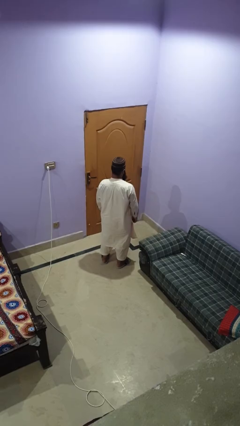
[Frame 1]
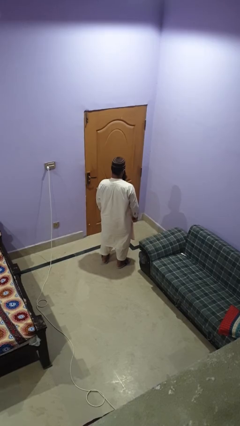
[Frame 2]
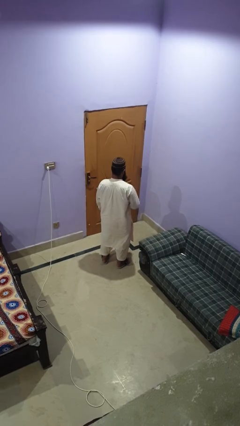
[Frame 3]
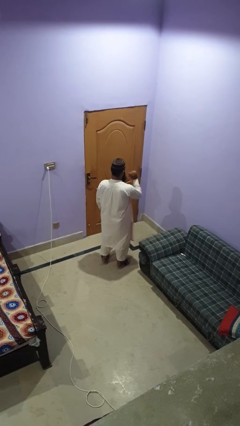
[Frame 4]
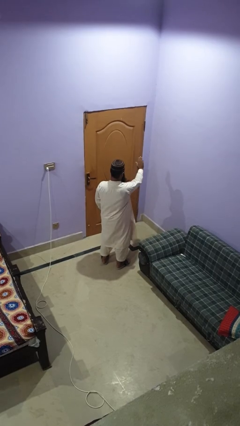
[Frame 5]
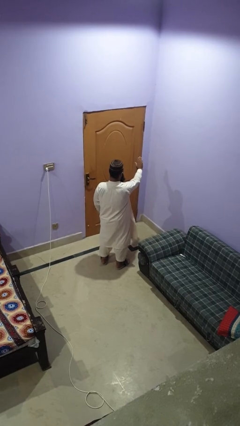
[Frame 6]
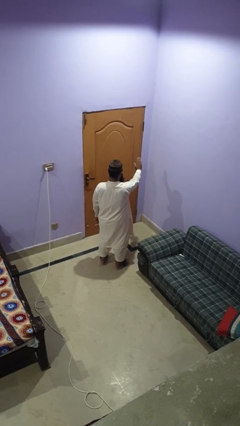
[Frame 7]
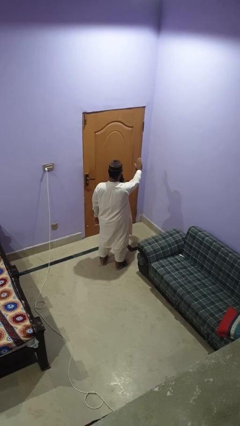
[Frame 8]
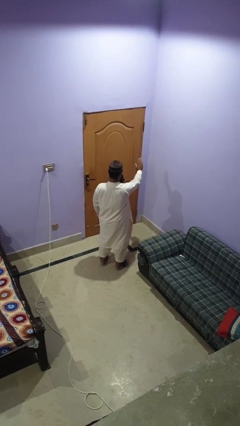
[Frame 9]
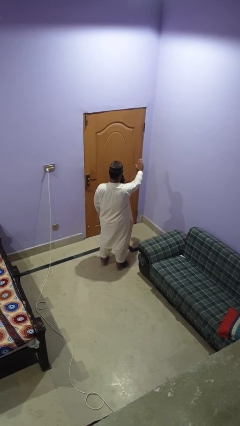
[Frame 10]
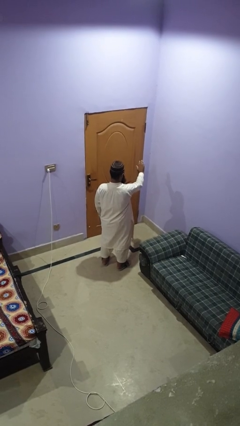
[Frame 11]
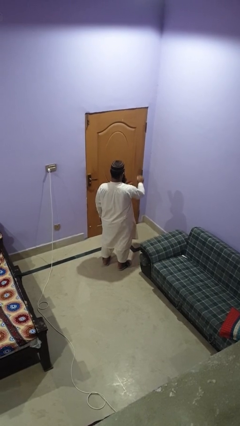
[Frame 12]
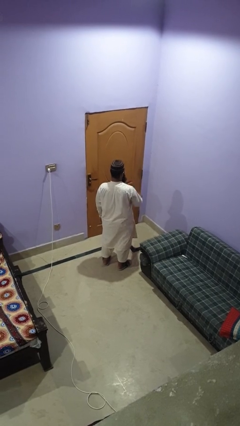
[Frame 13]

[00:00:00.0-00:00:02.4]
person gestures stop

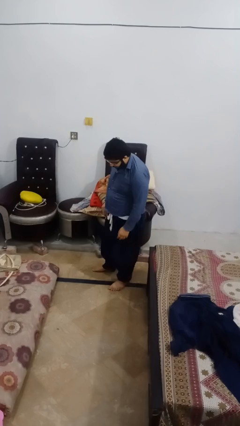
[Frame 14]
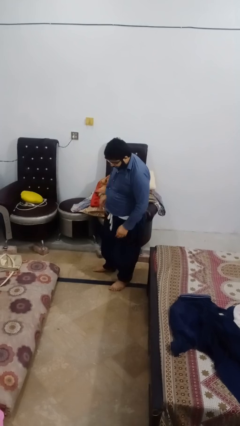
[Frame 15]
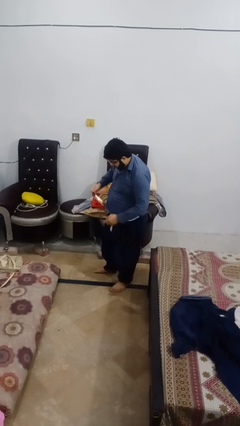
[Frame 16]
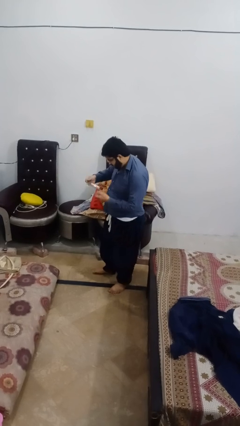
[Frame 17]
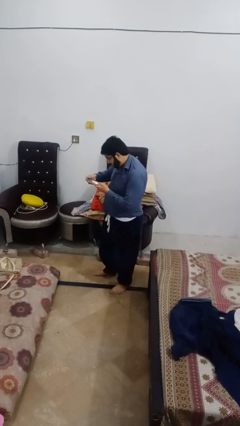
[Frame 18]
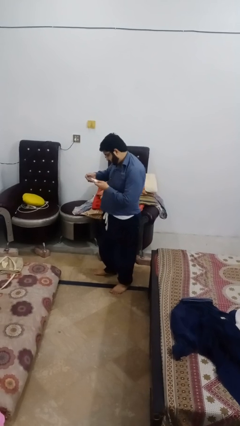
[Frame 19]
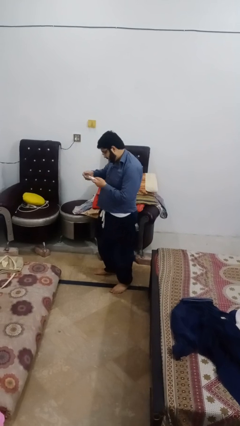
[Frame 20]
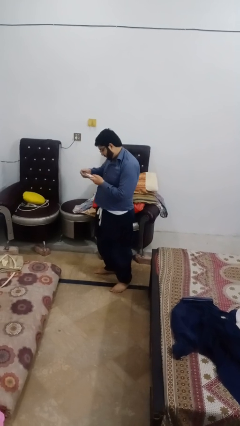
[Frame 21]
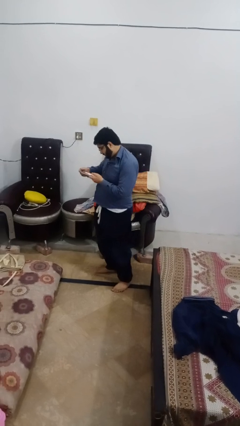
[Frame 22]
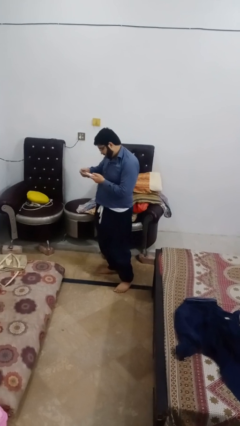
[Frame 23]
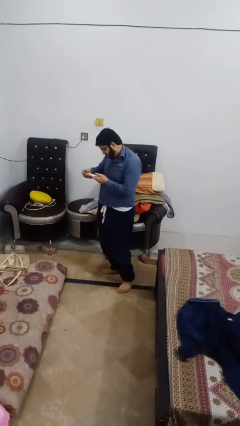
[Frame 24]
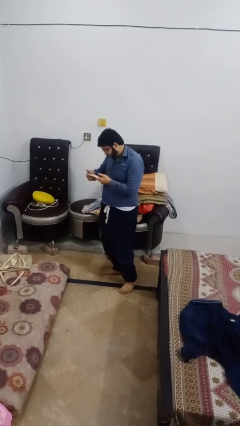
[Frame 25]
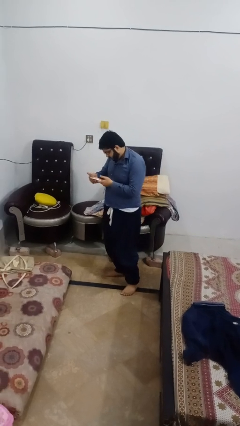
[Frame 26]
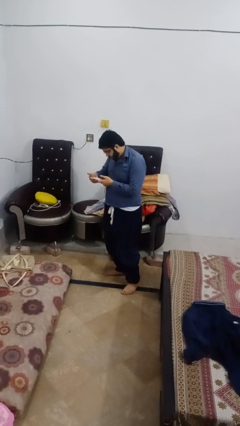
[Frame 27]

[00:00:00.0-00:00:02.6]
person takes phone from pocket

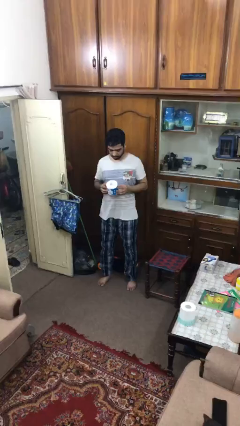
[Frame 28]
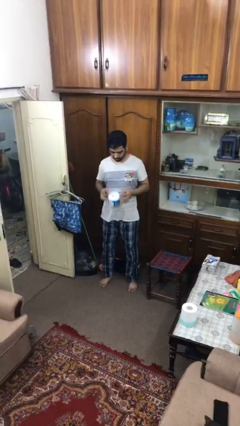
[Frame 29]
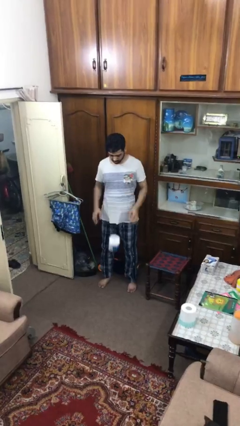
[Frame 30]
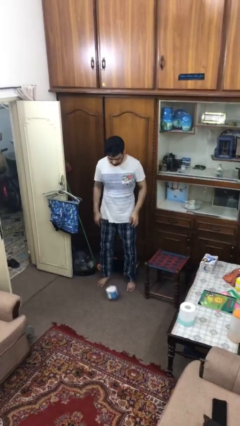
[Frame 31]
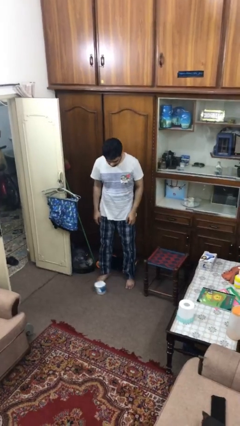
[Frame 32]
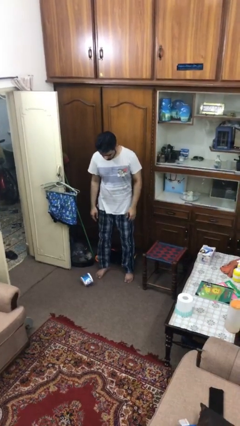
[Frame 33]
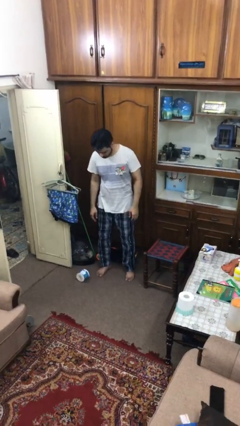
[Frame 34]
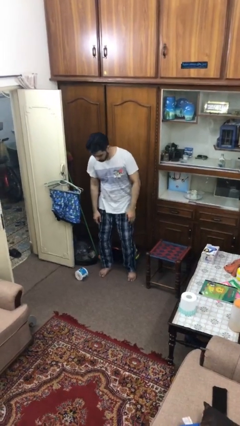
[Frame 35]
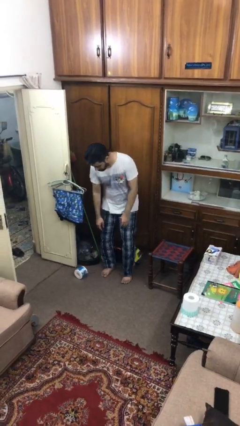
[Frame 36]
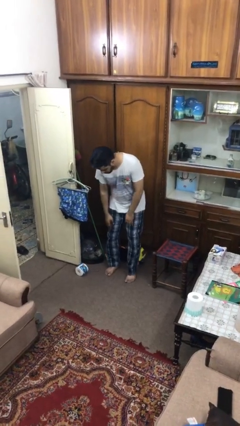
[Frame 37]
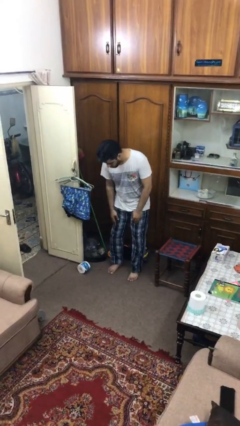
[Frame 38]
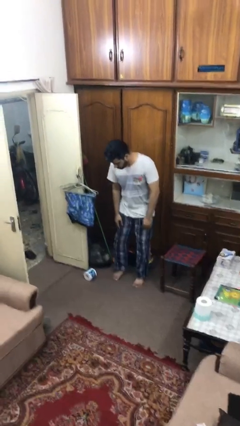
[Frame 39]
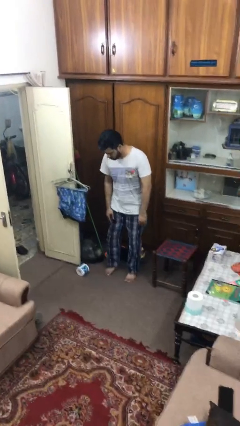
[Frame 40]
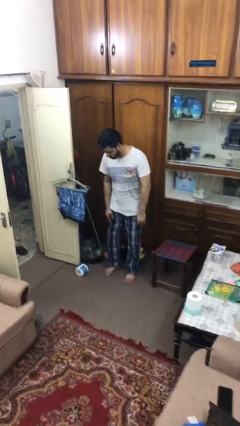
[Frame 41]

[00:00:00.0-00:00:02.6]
person drops object

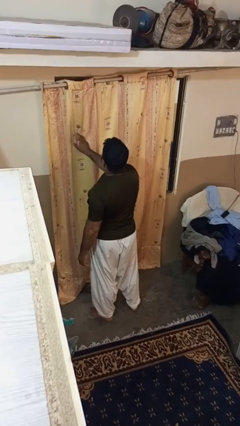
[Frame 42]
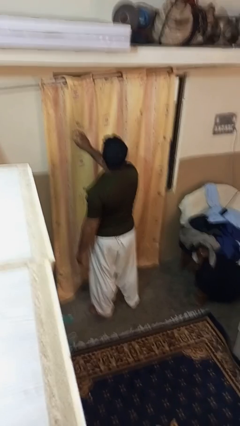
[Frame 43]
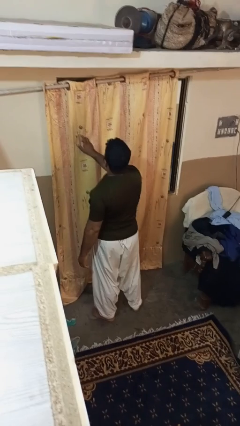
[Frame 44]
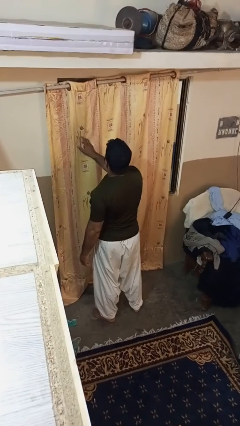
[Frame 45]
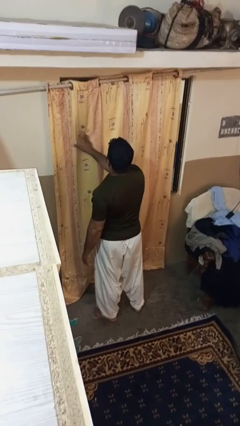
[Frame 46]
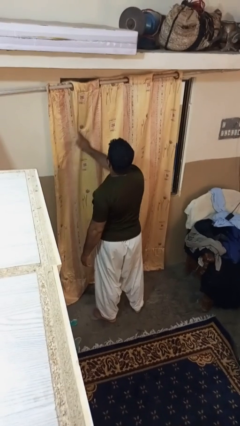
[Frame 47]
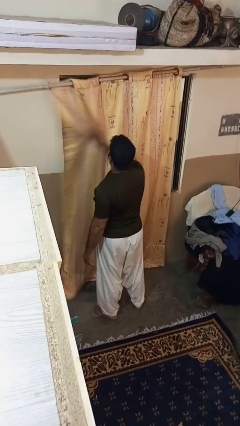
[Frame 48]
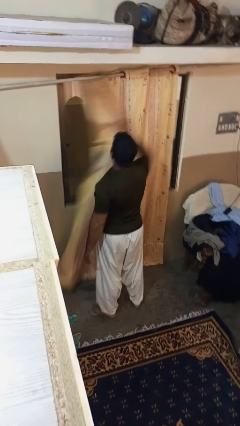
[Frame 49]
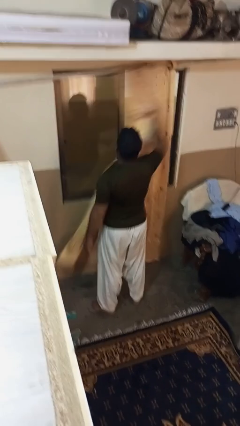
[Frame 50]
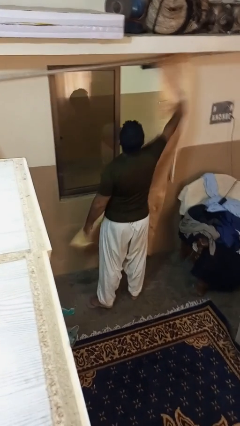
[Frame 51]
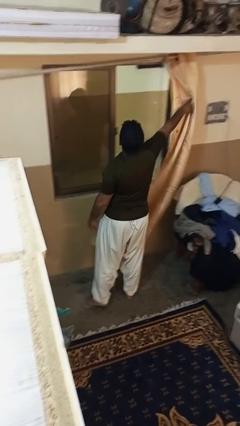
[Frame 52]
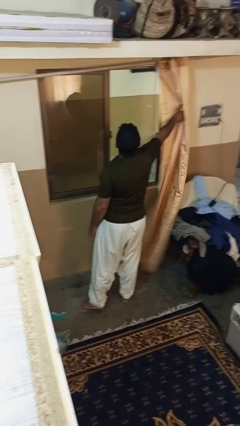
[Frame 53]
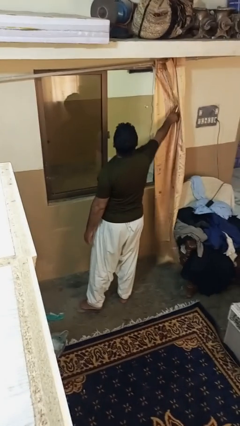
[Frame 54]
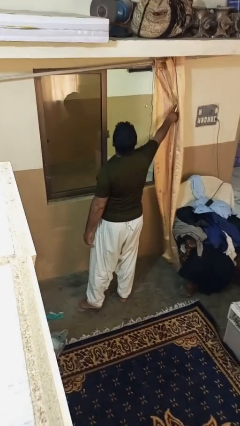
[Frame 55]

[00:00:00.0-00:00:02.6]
person opens curtains

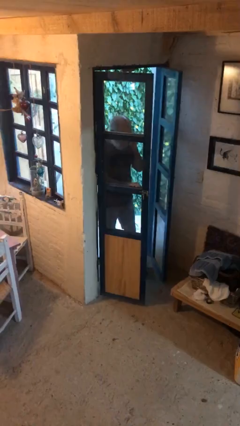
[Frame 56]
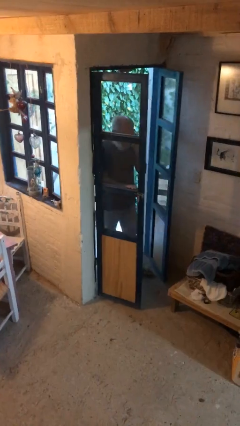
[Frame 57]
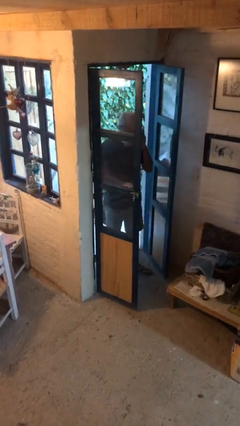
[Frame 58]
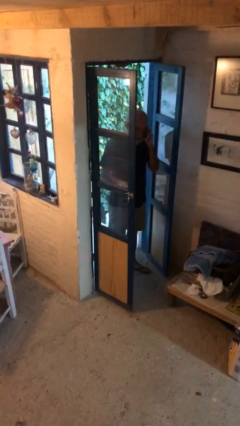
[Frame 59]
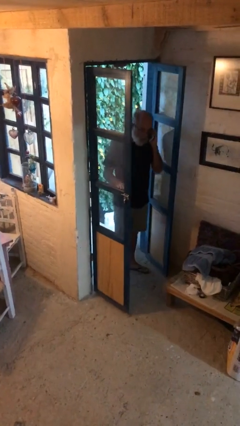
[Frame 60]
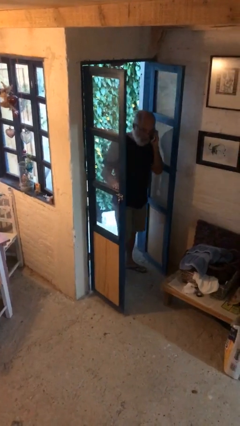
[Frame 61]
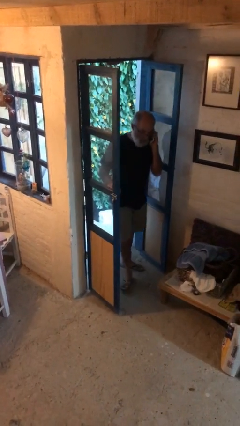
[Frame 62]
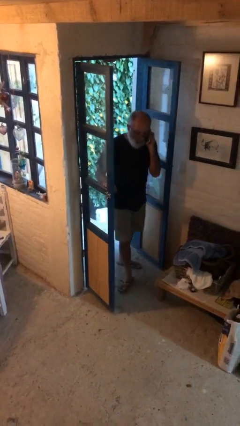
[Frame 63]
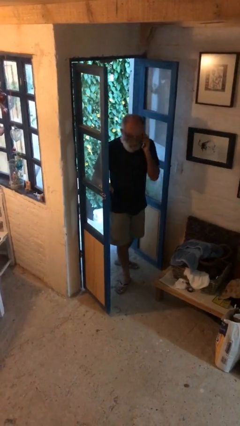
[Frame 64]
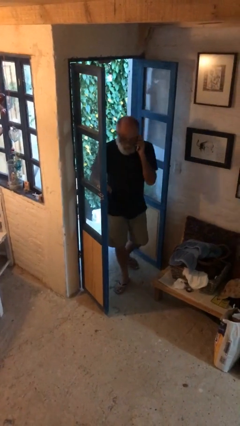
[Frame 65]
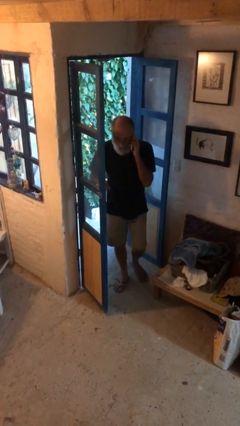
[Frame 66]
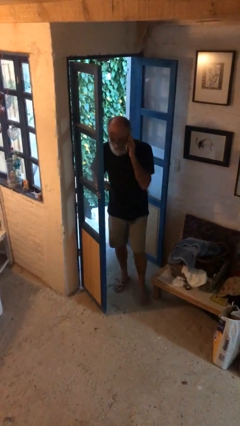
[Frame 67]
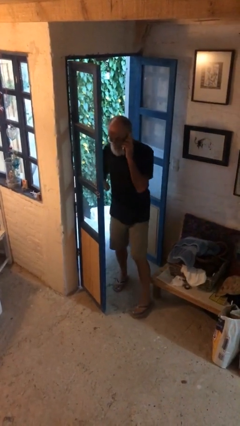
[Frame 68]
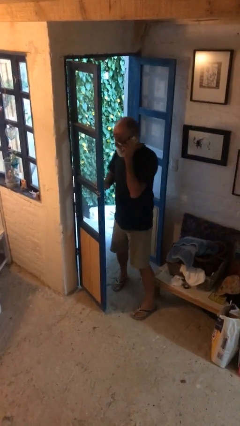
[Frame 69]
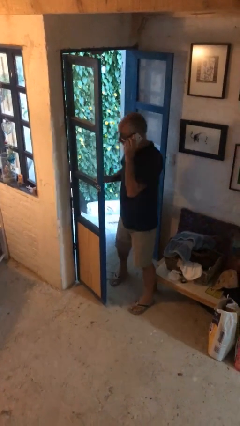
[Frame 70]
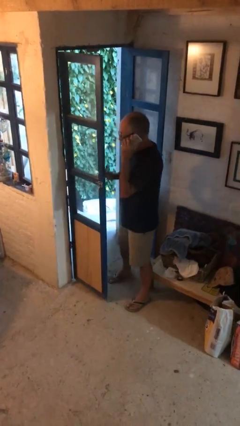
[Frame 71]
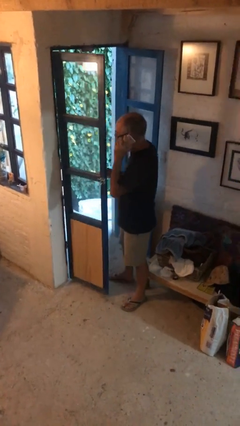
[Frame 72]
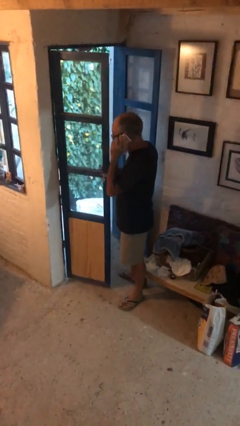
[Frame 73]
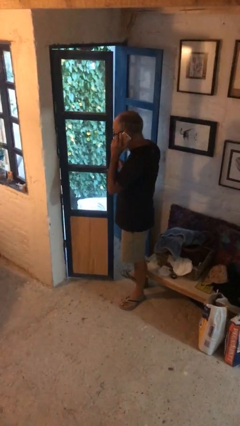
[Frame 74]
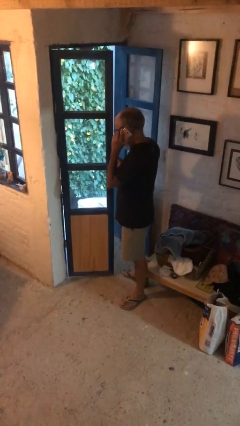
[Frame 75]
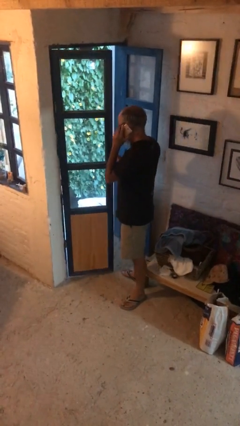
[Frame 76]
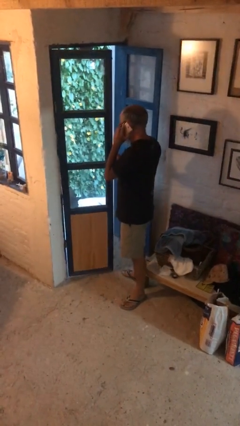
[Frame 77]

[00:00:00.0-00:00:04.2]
person enters scene through structure

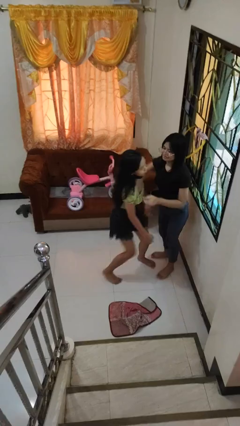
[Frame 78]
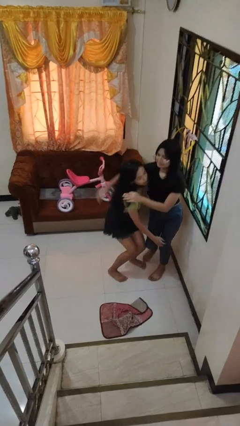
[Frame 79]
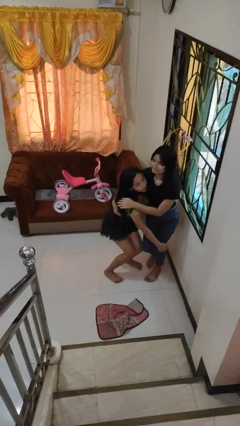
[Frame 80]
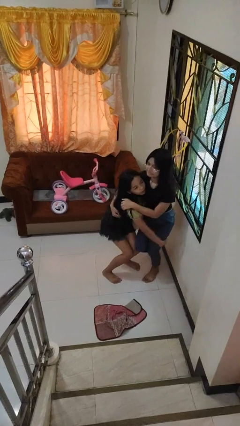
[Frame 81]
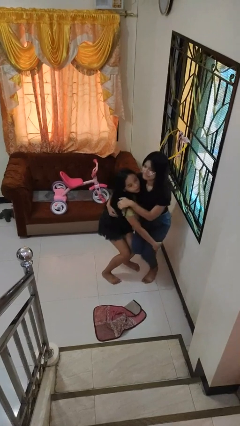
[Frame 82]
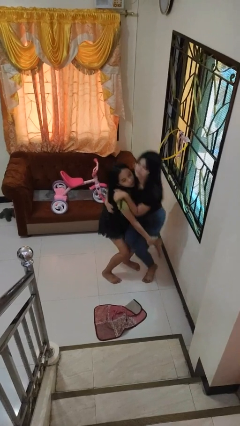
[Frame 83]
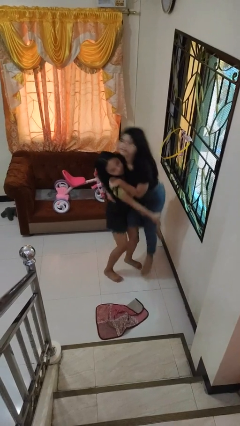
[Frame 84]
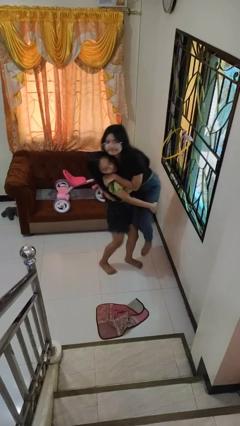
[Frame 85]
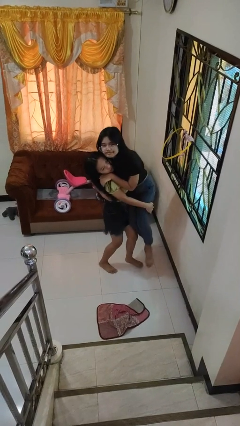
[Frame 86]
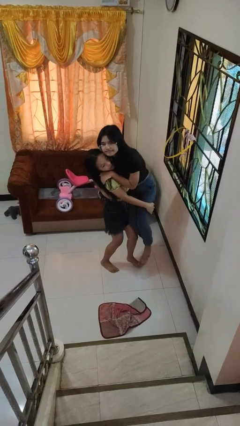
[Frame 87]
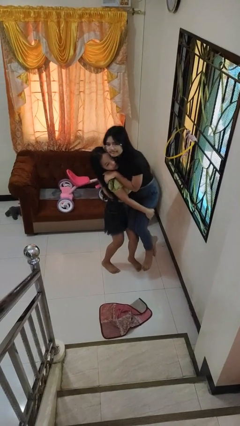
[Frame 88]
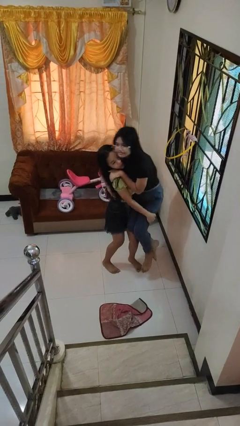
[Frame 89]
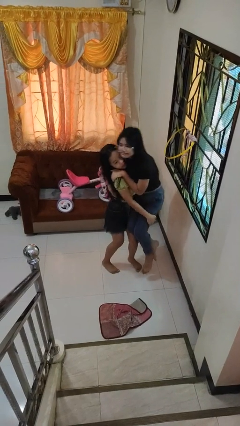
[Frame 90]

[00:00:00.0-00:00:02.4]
person picks up person

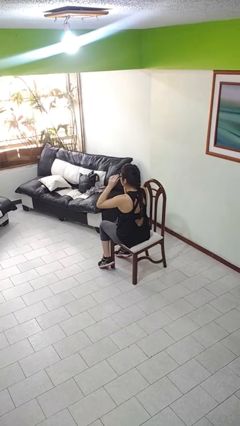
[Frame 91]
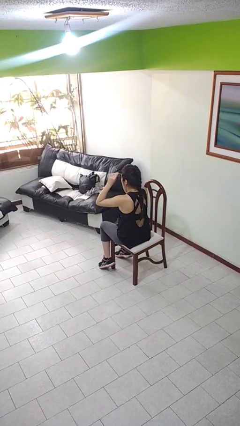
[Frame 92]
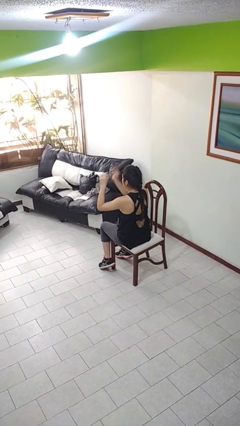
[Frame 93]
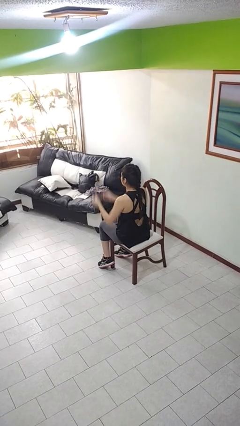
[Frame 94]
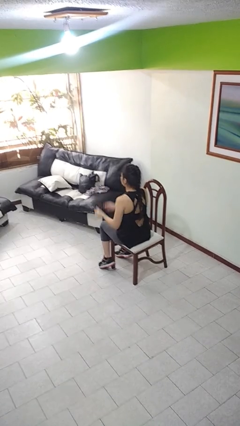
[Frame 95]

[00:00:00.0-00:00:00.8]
person takes off glasses
